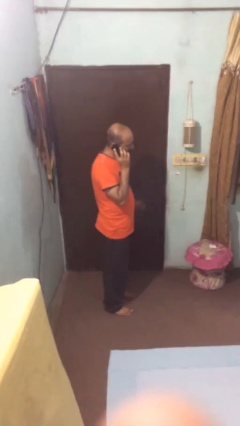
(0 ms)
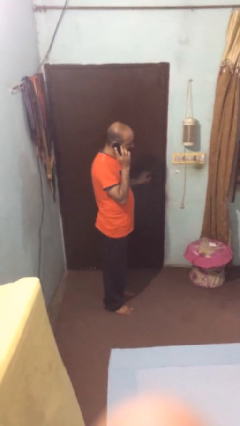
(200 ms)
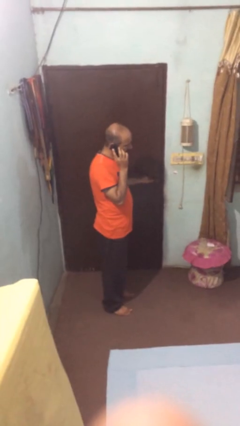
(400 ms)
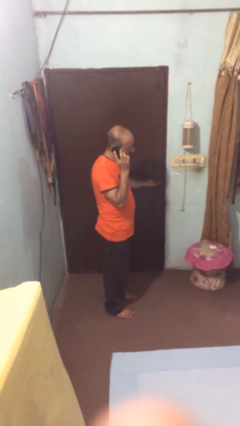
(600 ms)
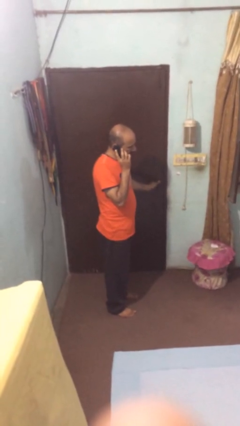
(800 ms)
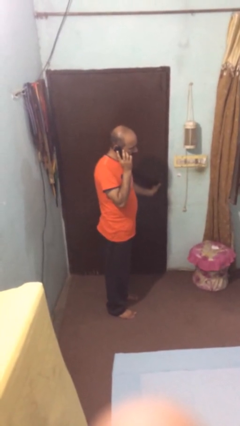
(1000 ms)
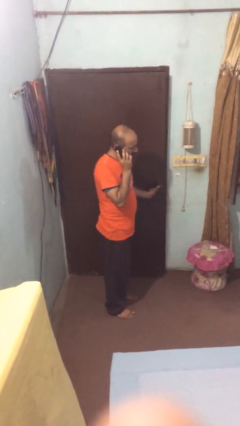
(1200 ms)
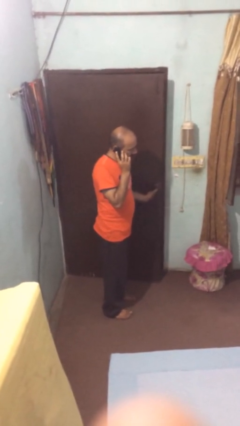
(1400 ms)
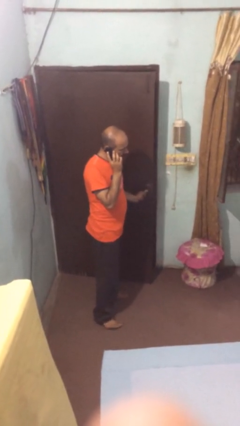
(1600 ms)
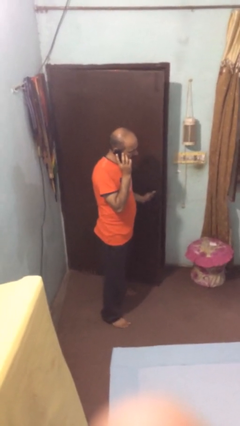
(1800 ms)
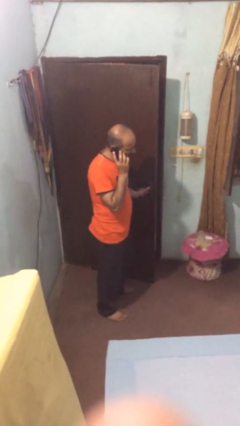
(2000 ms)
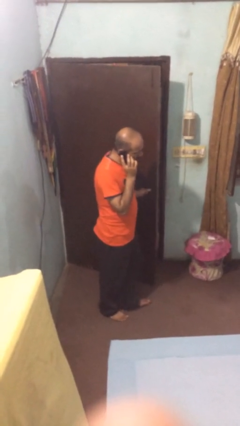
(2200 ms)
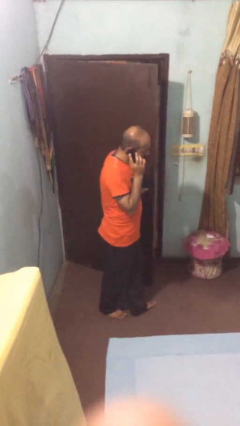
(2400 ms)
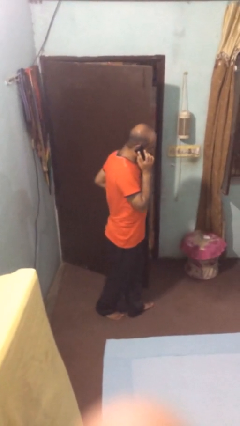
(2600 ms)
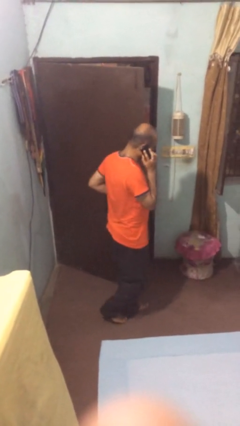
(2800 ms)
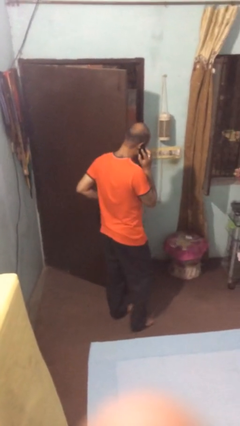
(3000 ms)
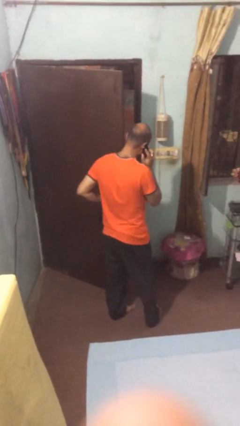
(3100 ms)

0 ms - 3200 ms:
person opens facility door

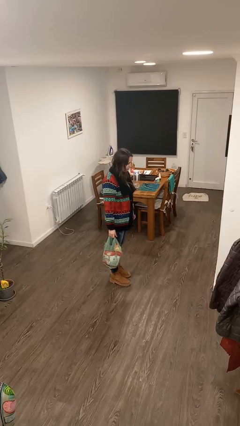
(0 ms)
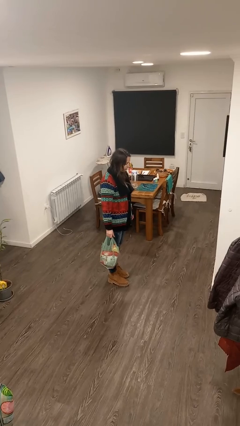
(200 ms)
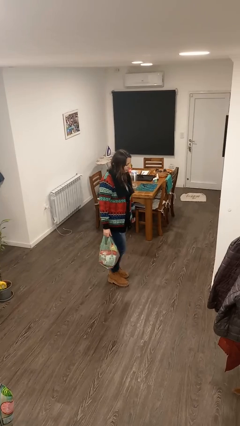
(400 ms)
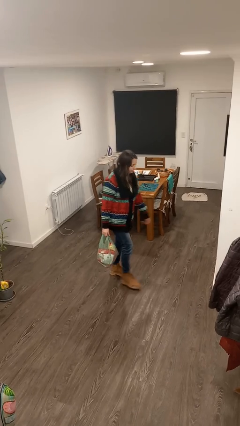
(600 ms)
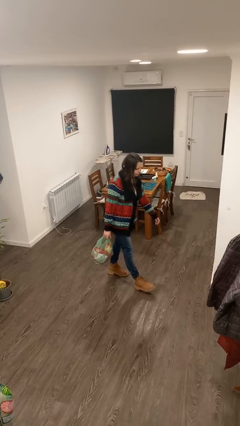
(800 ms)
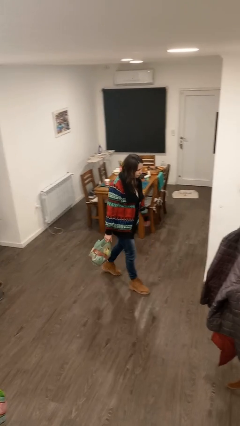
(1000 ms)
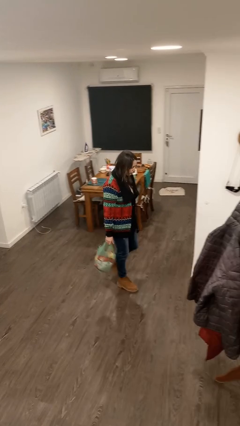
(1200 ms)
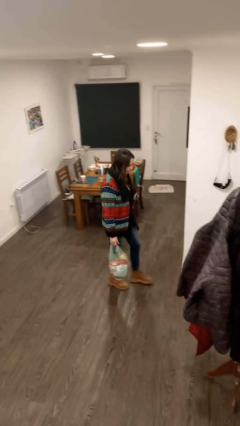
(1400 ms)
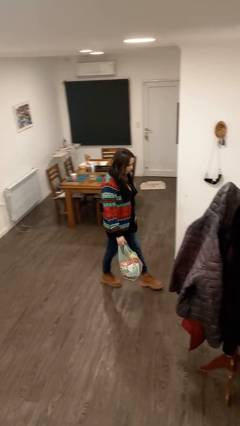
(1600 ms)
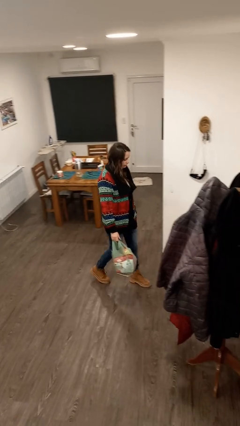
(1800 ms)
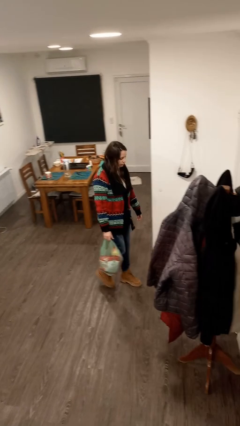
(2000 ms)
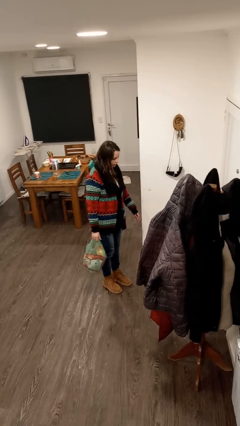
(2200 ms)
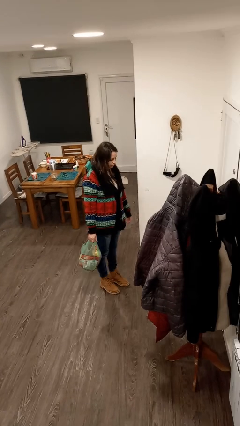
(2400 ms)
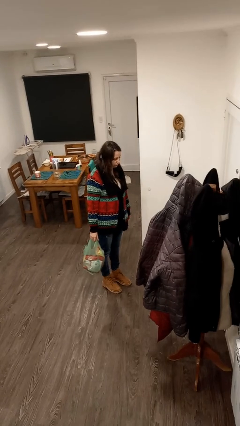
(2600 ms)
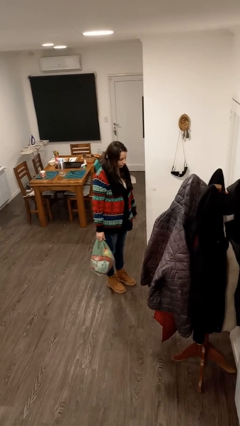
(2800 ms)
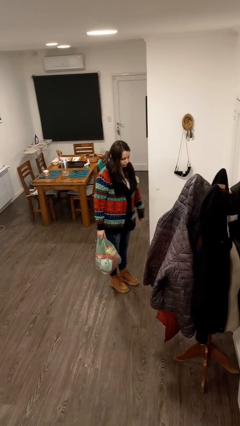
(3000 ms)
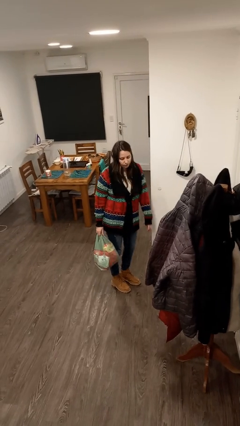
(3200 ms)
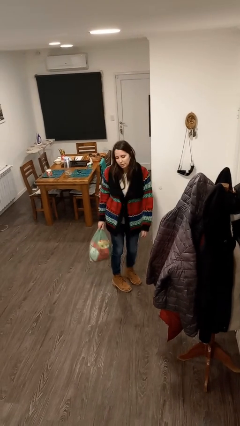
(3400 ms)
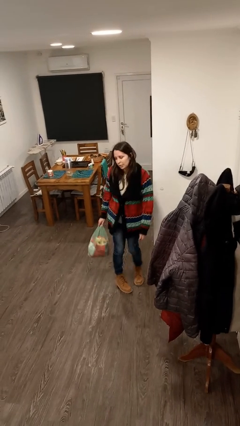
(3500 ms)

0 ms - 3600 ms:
person carries groceries

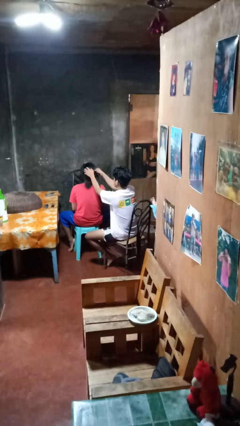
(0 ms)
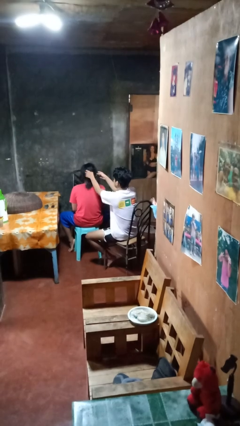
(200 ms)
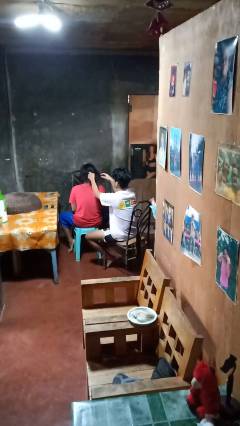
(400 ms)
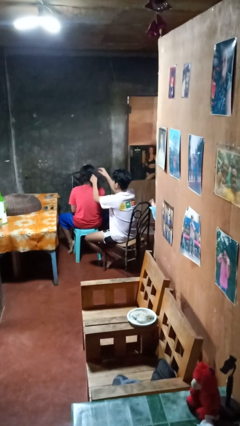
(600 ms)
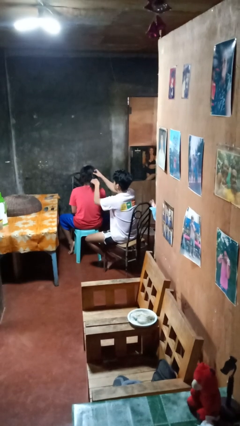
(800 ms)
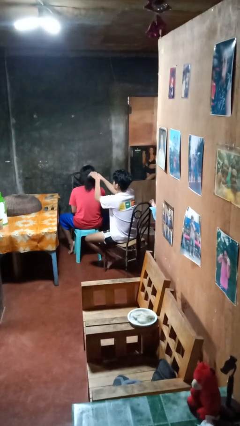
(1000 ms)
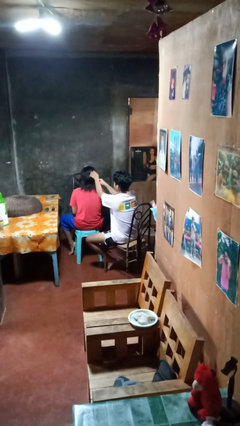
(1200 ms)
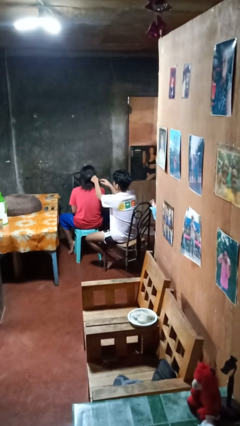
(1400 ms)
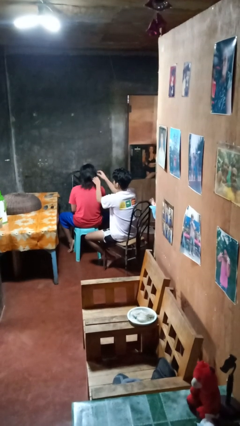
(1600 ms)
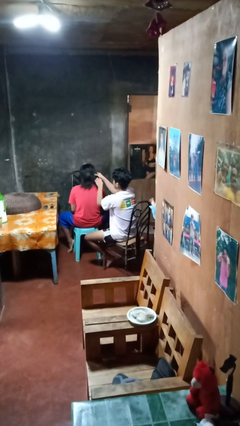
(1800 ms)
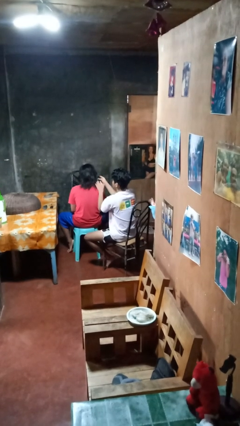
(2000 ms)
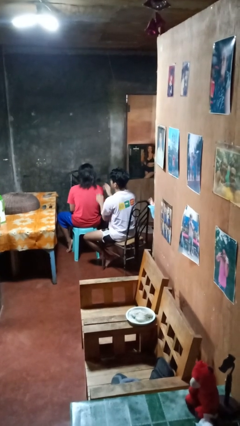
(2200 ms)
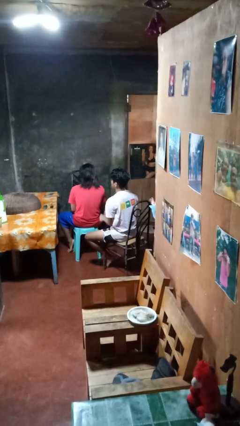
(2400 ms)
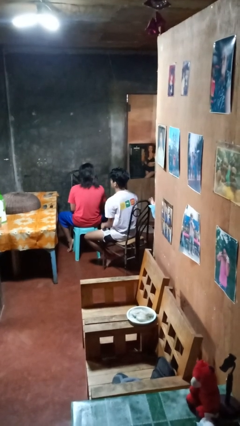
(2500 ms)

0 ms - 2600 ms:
person braids hair of person

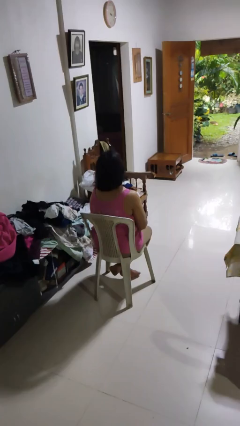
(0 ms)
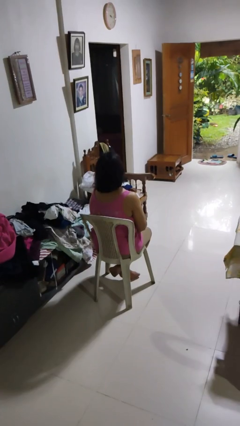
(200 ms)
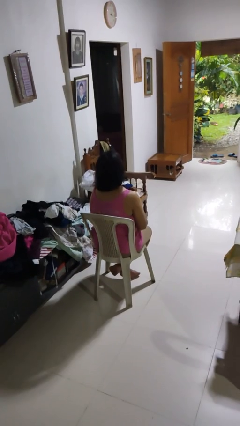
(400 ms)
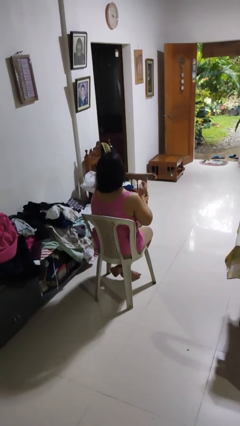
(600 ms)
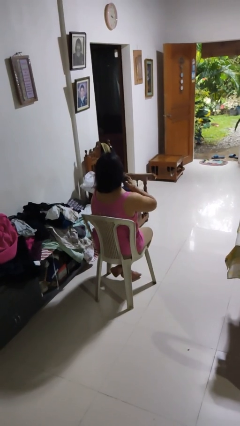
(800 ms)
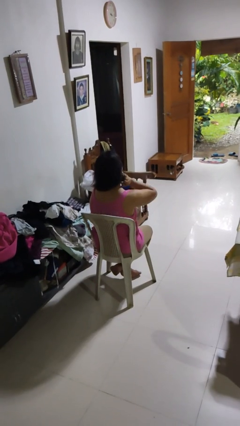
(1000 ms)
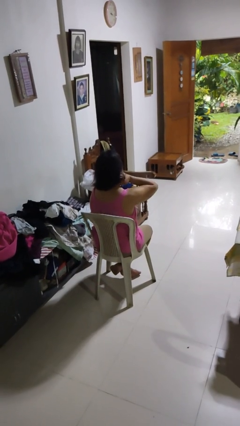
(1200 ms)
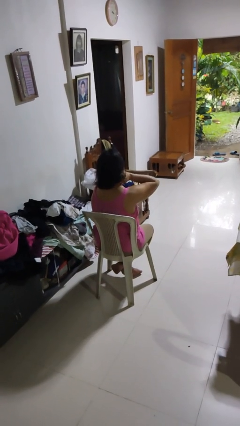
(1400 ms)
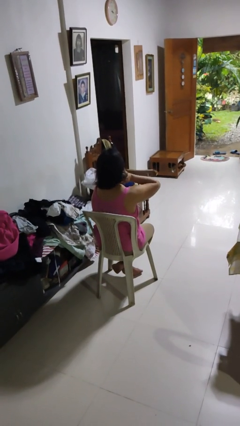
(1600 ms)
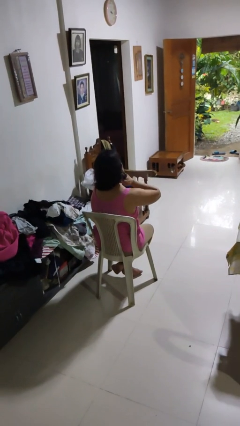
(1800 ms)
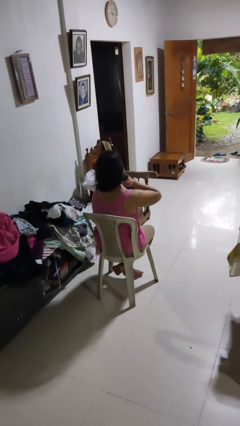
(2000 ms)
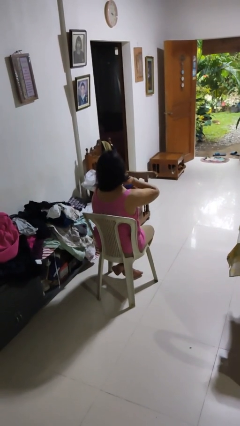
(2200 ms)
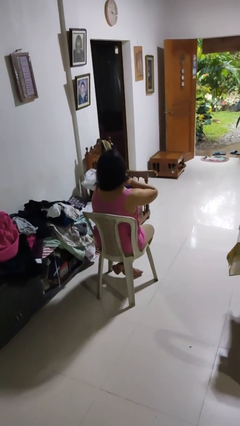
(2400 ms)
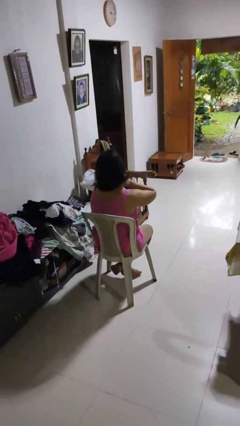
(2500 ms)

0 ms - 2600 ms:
person rubs neck

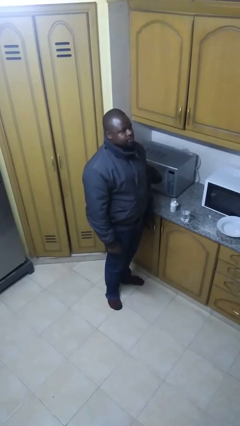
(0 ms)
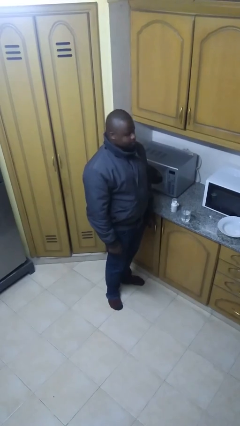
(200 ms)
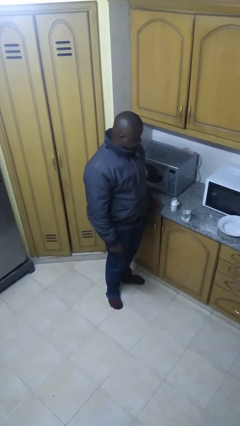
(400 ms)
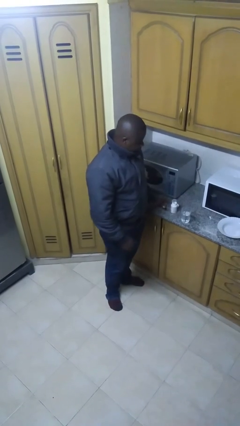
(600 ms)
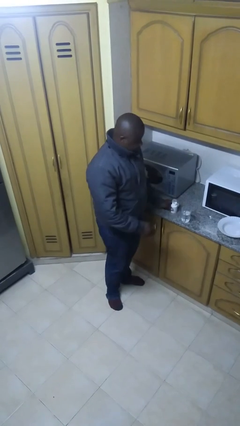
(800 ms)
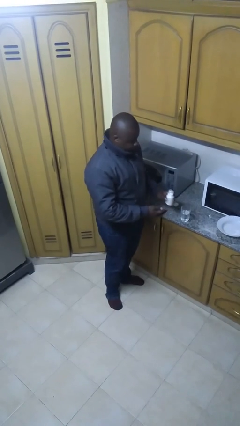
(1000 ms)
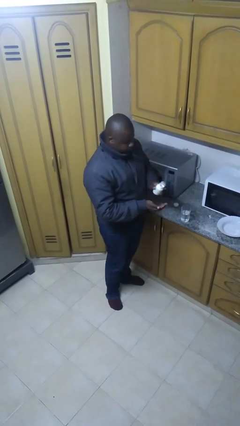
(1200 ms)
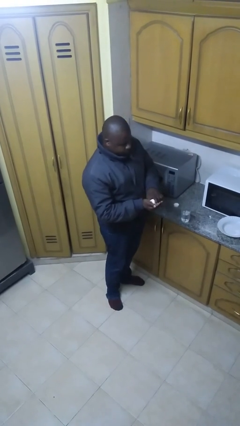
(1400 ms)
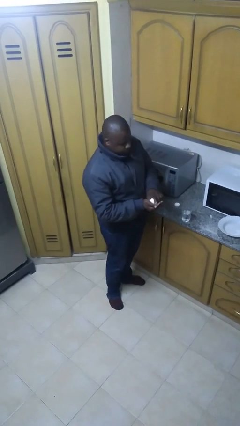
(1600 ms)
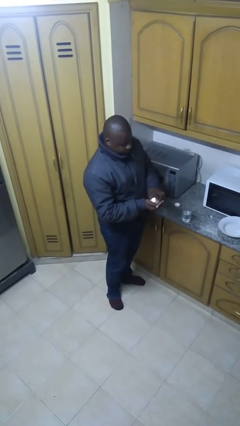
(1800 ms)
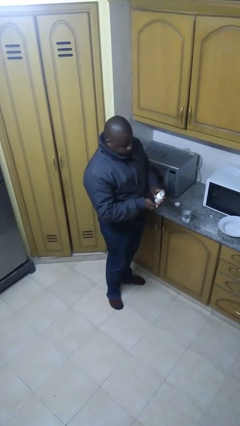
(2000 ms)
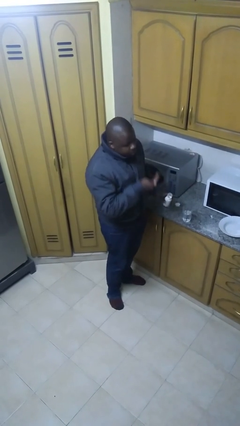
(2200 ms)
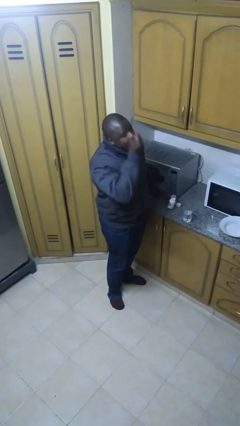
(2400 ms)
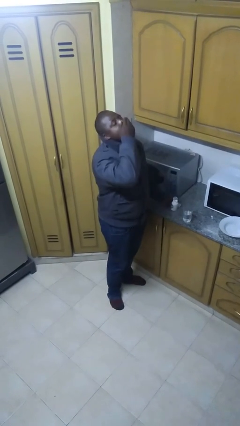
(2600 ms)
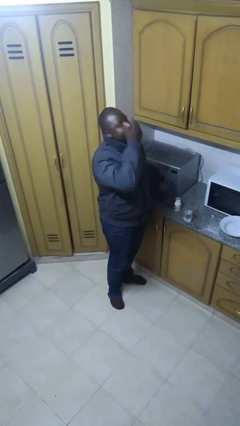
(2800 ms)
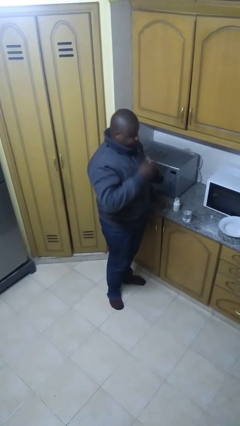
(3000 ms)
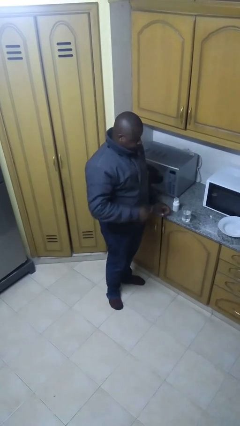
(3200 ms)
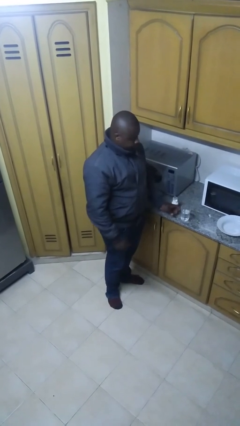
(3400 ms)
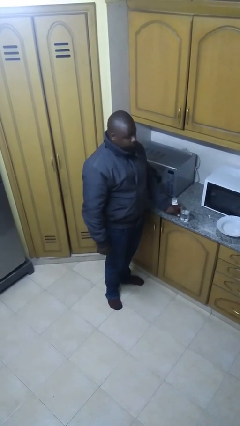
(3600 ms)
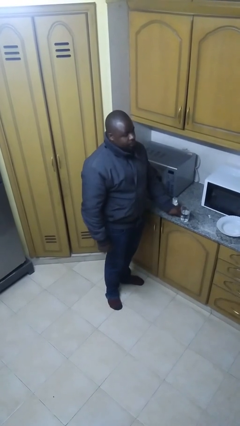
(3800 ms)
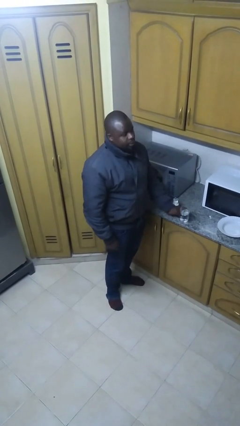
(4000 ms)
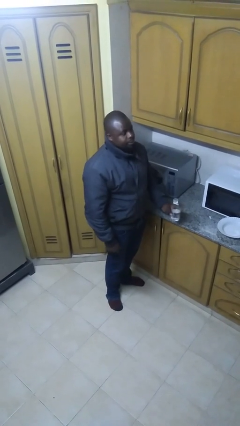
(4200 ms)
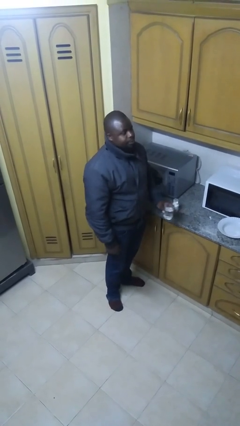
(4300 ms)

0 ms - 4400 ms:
person takes medicine pills

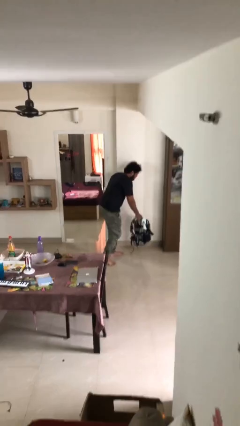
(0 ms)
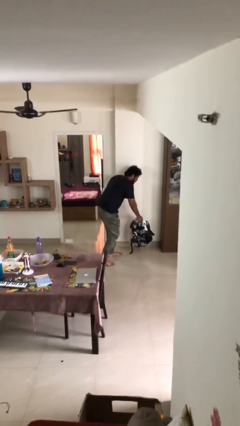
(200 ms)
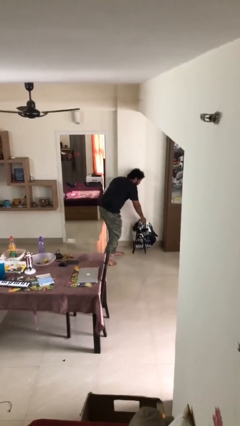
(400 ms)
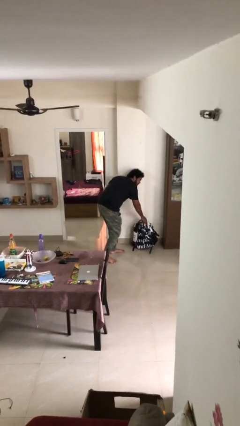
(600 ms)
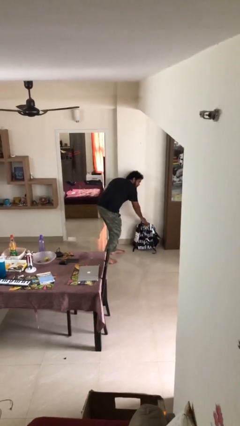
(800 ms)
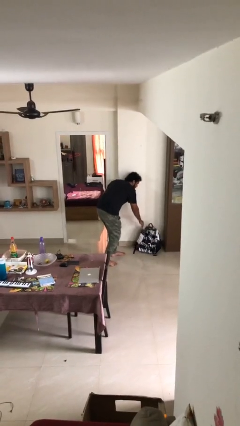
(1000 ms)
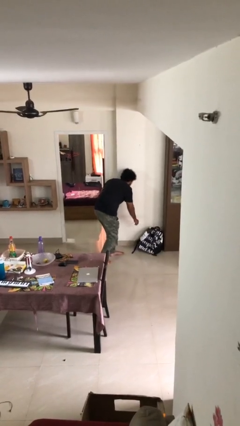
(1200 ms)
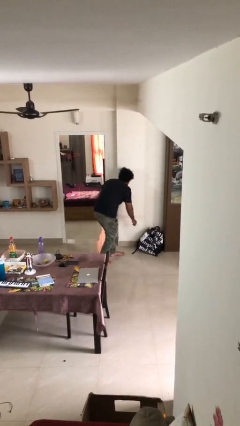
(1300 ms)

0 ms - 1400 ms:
person puts down object on floor
